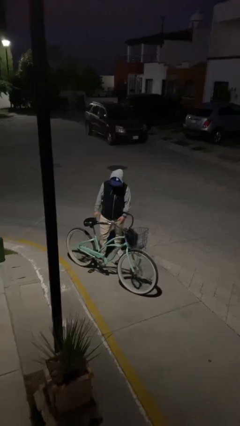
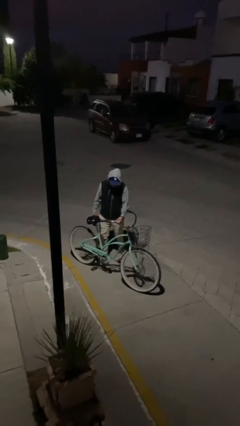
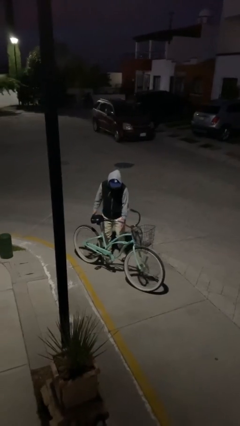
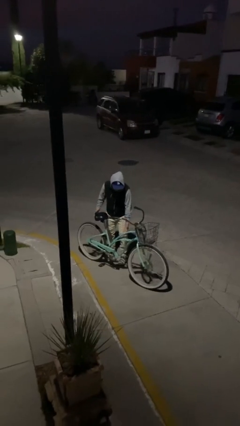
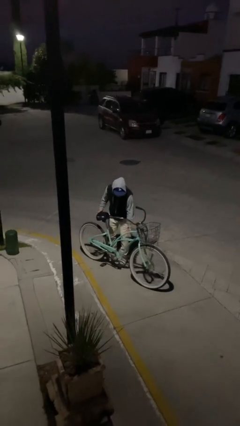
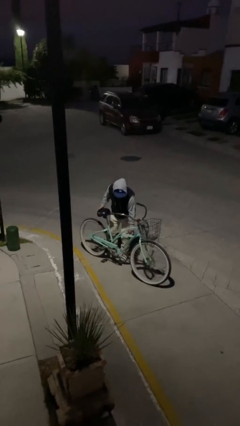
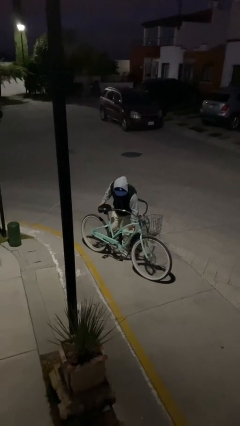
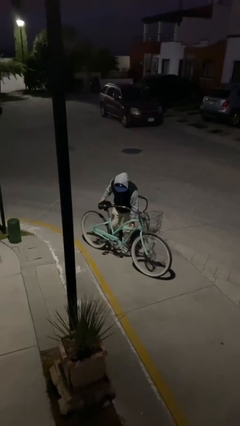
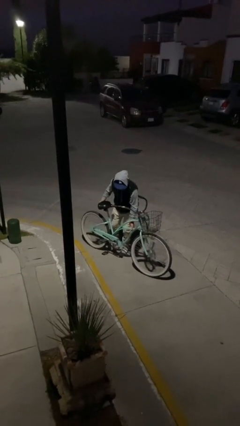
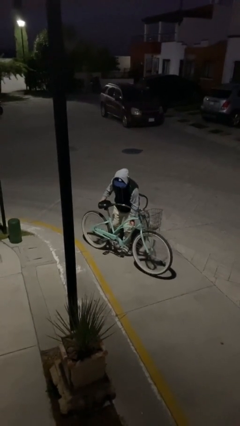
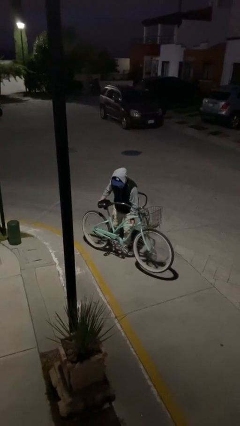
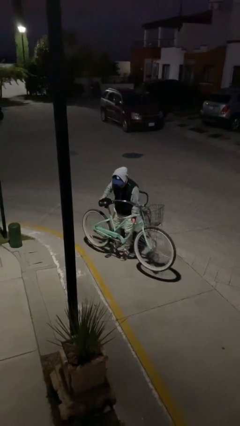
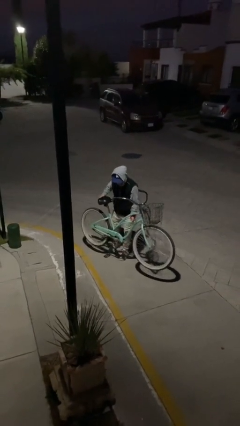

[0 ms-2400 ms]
person picks up object from floor

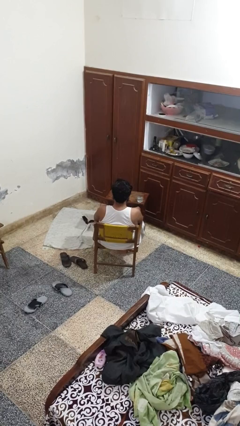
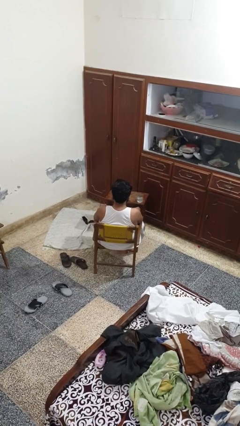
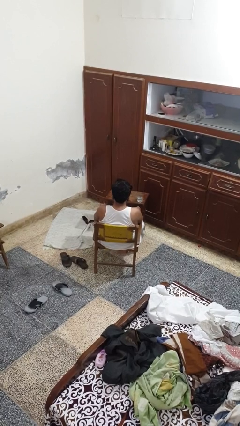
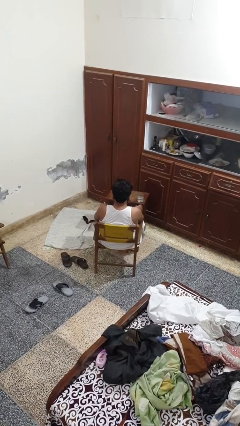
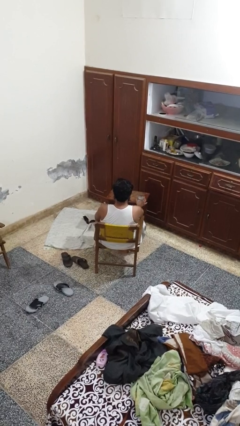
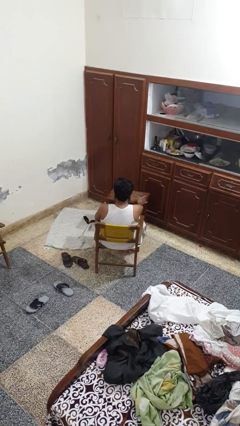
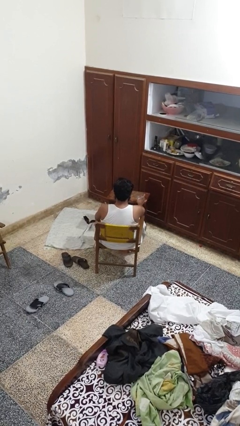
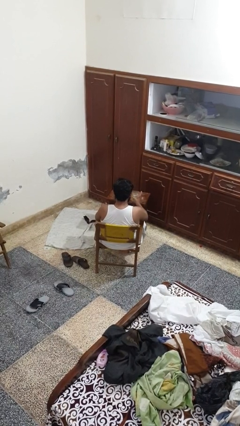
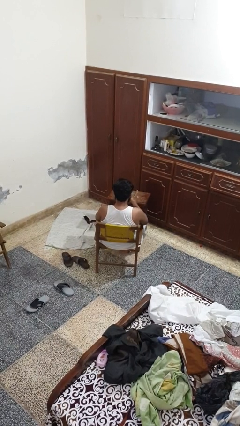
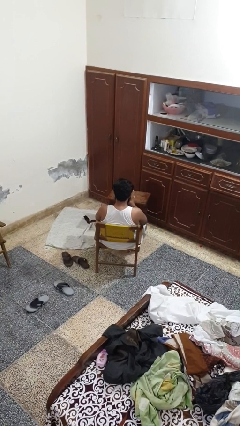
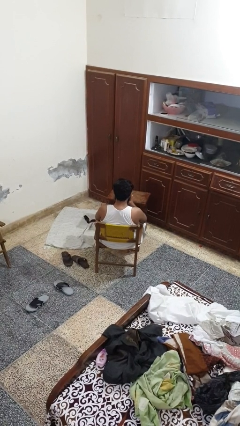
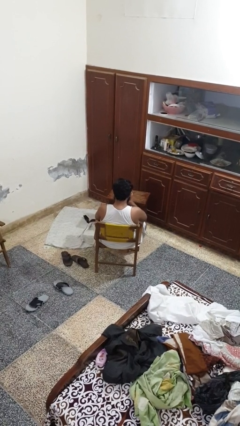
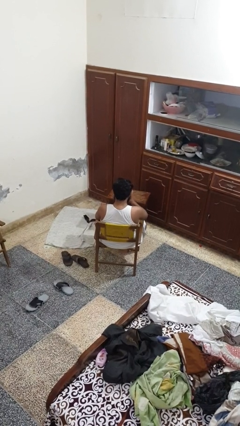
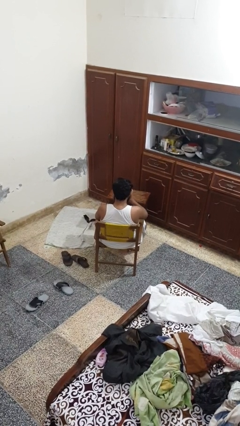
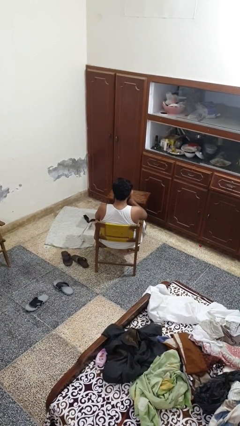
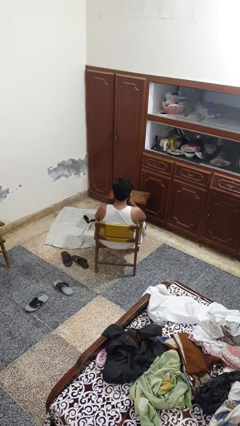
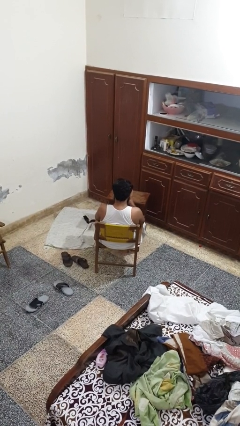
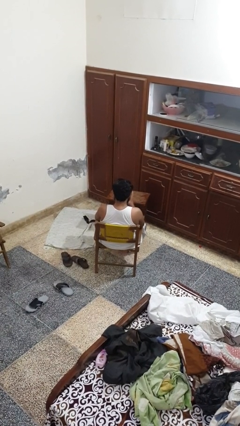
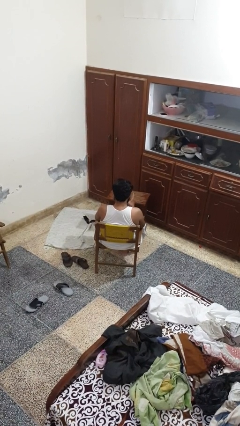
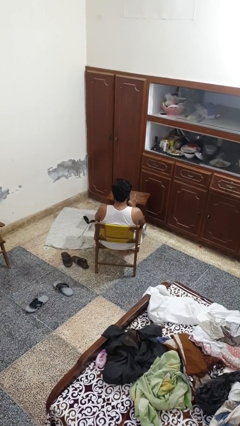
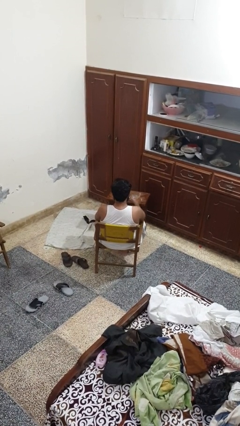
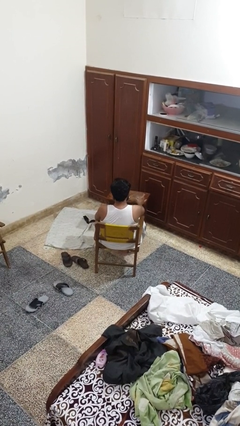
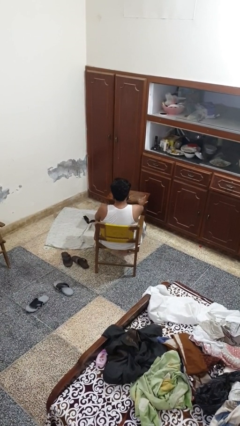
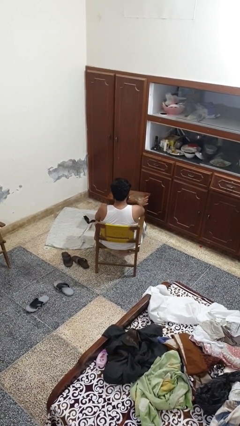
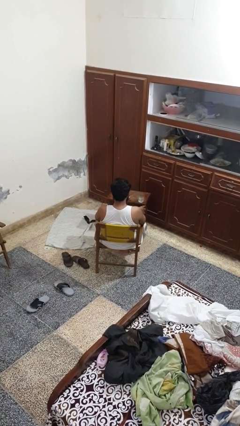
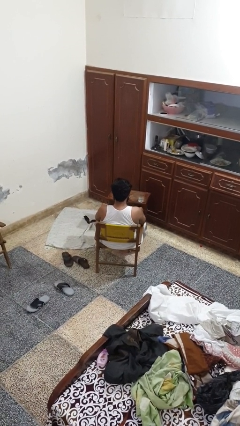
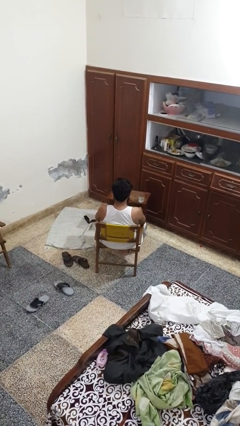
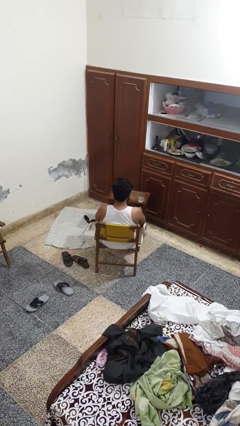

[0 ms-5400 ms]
person drinks from cup

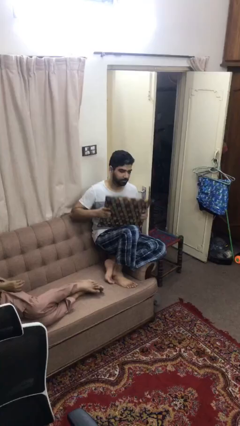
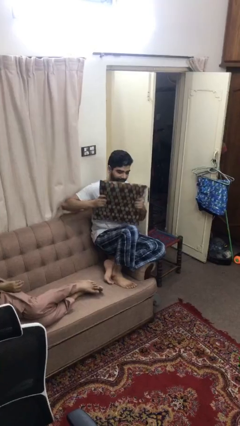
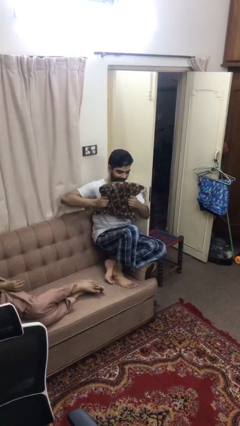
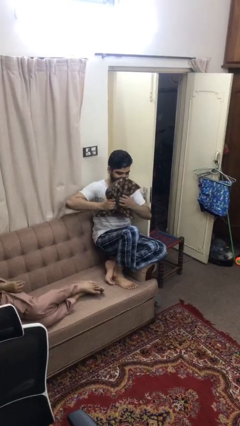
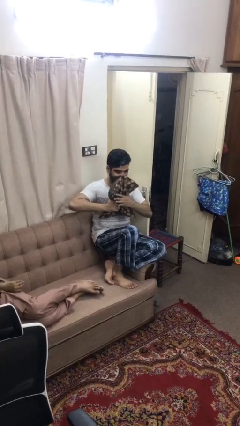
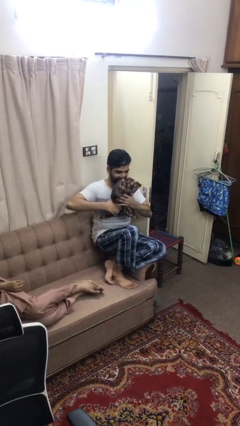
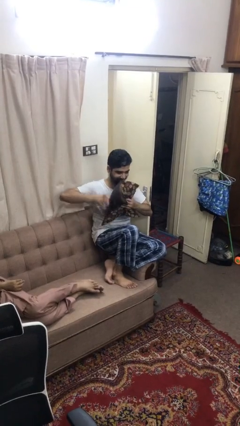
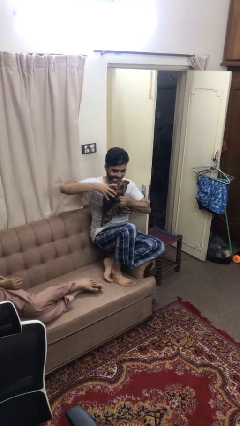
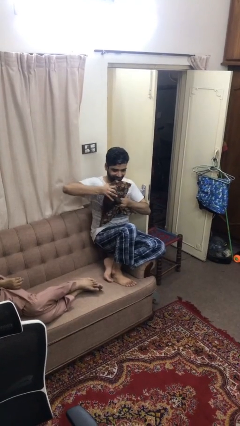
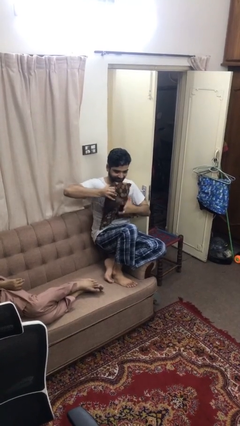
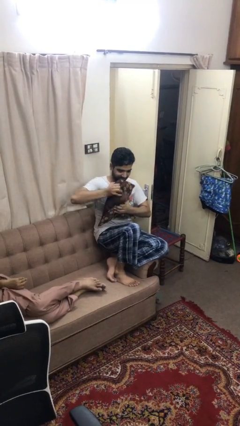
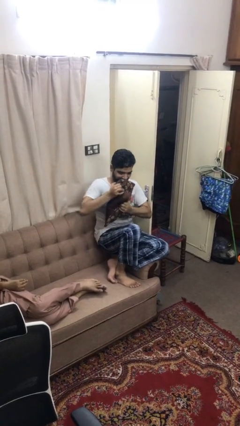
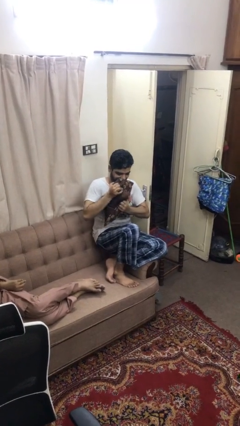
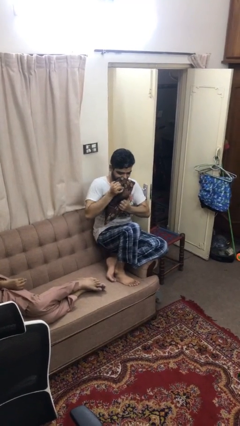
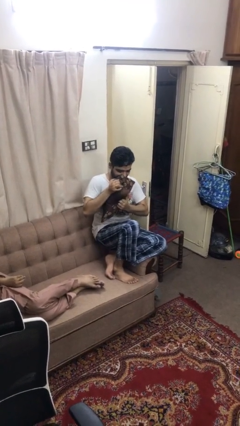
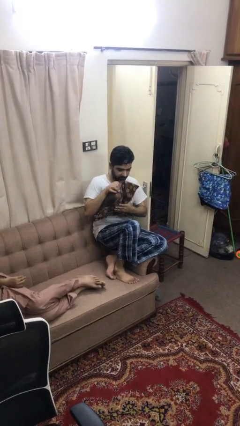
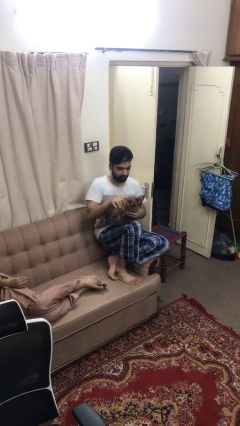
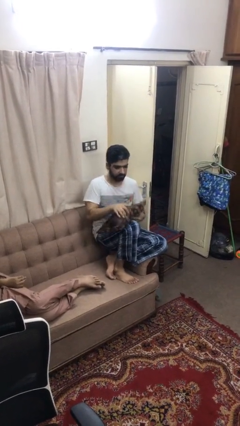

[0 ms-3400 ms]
person squeezes object

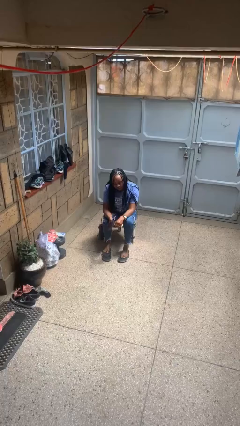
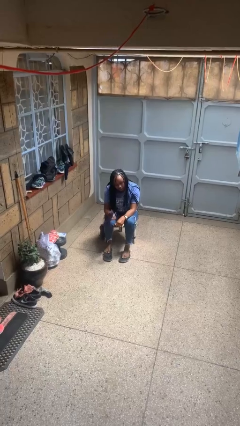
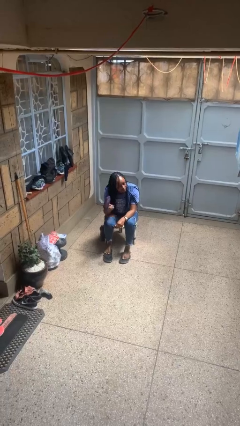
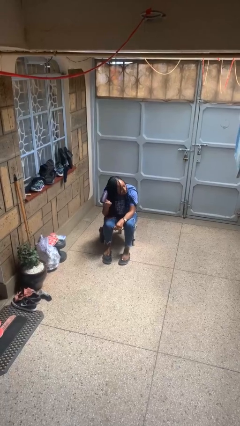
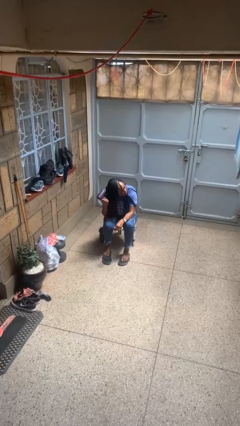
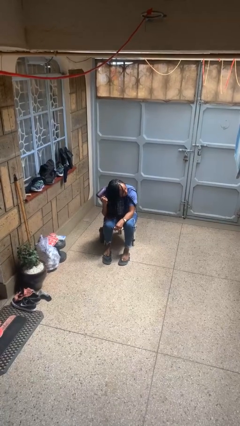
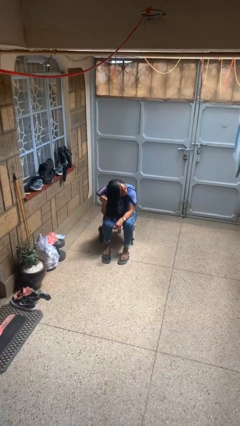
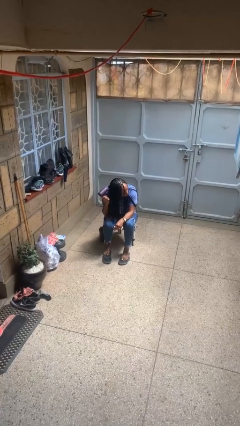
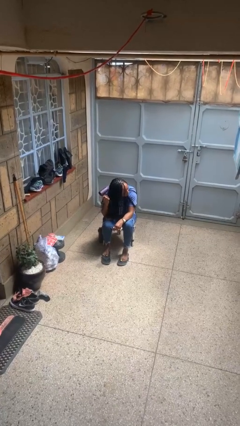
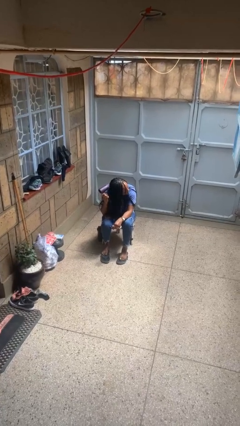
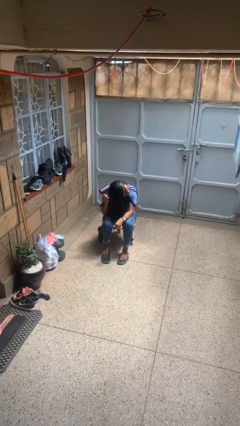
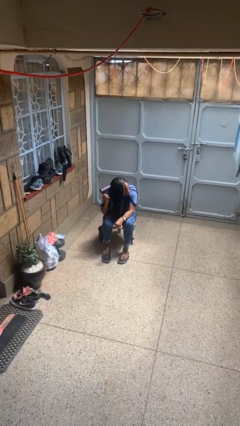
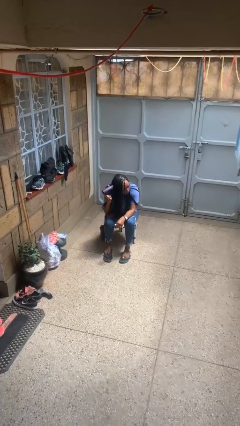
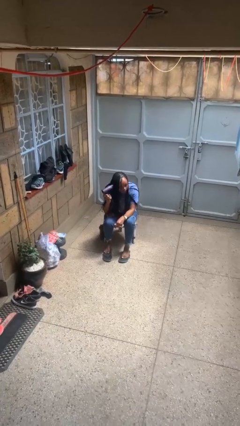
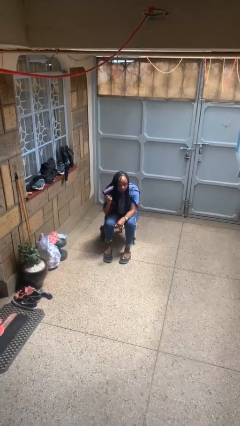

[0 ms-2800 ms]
person dries hair with hairdryer

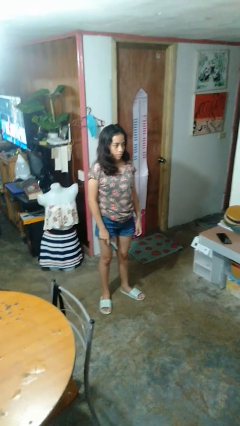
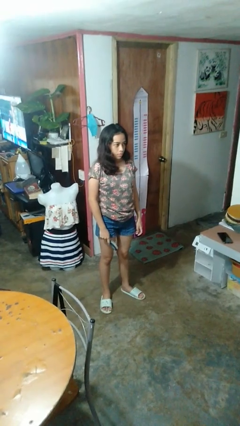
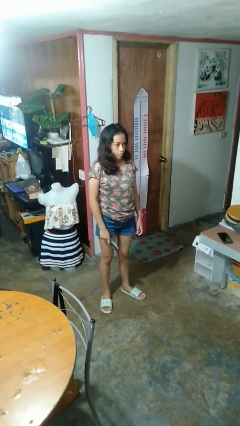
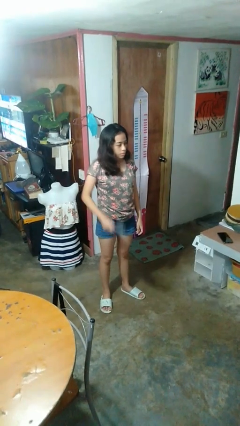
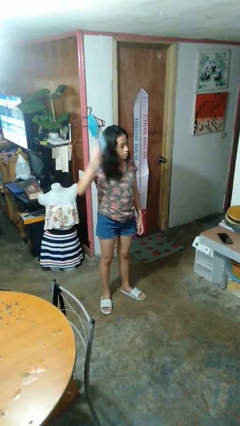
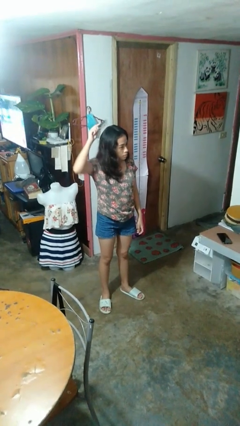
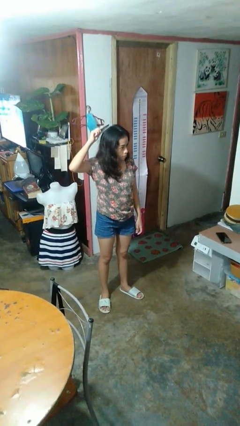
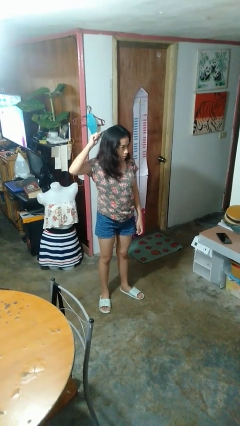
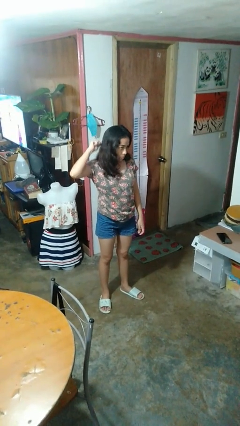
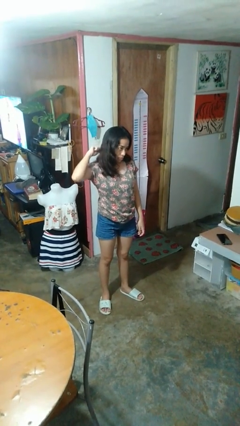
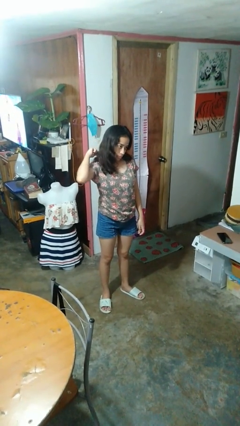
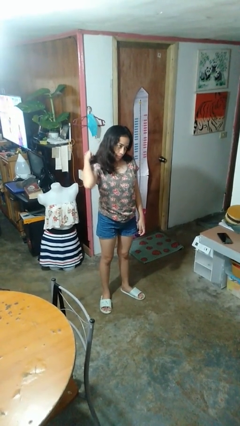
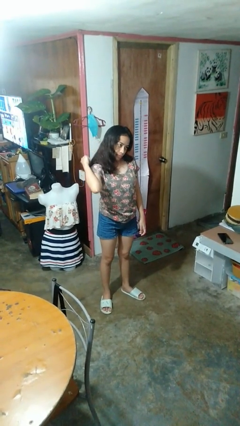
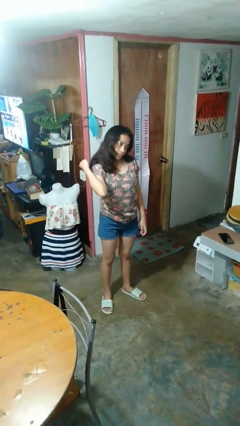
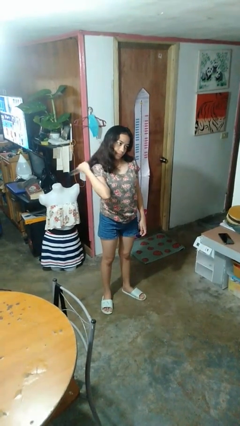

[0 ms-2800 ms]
person brushes hair

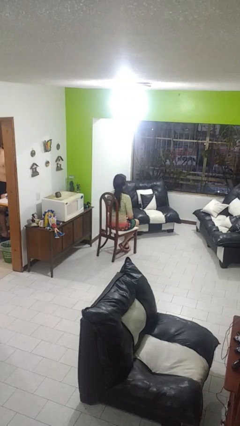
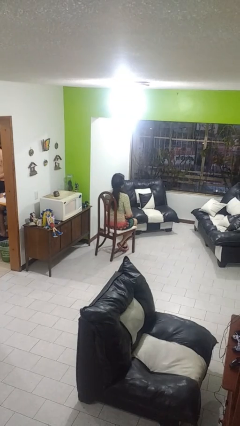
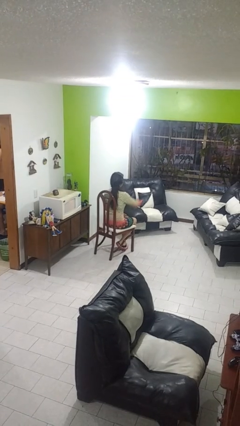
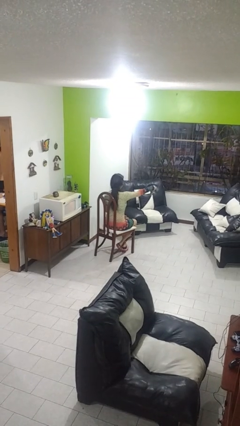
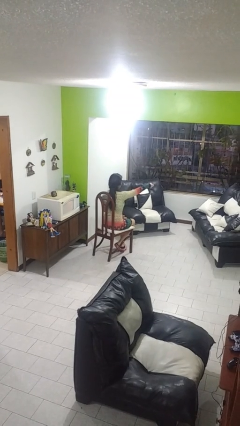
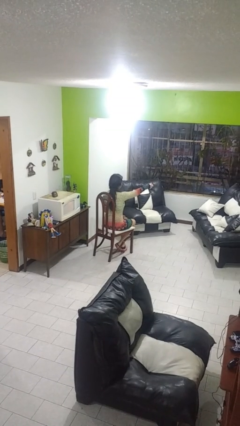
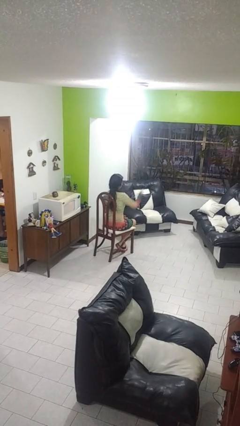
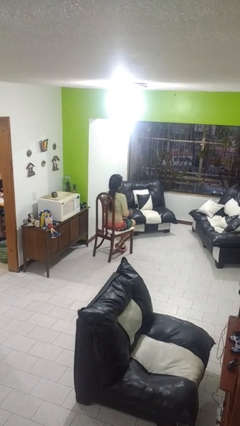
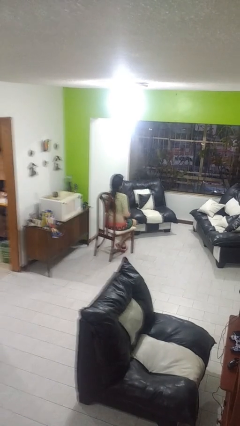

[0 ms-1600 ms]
person uses television remote
